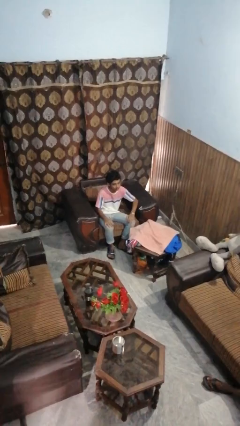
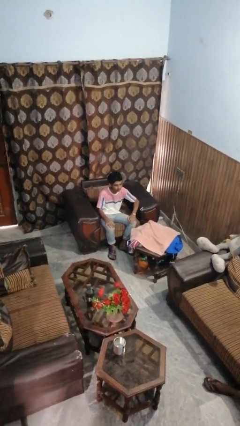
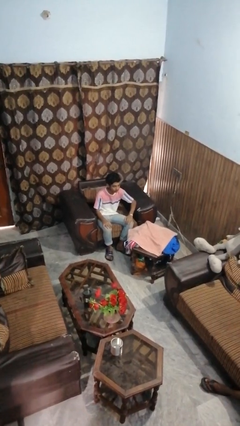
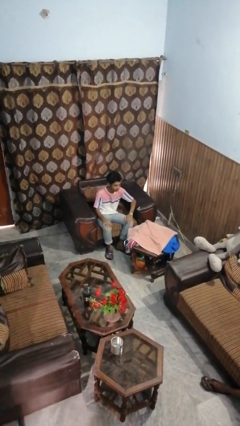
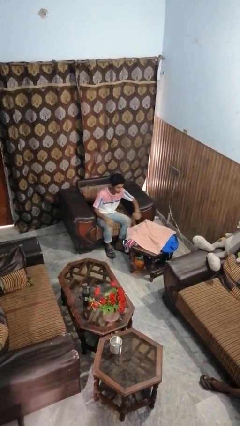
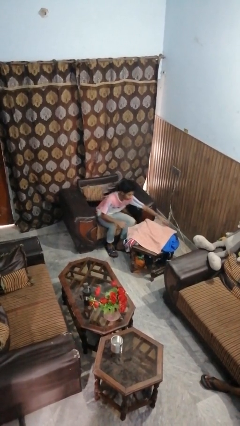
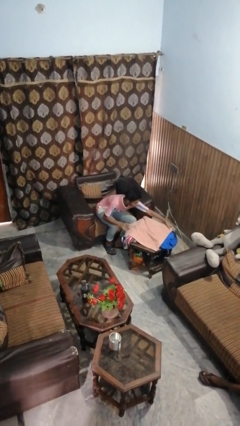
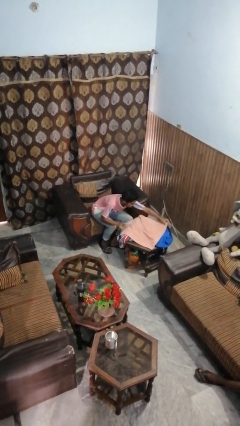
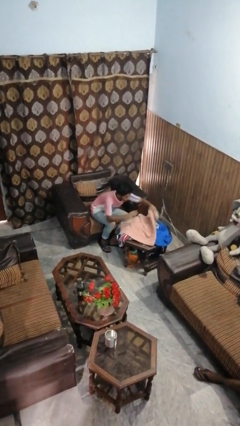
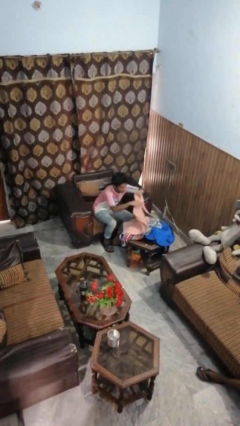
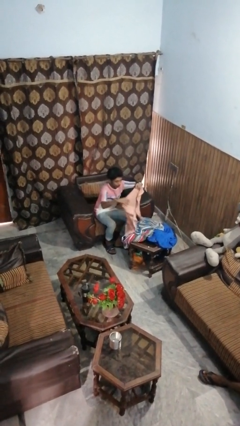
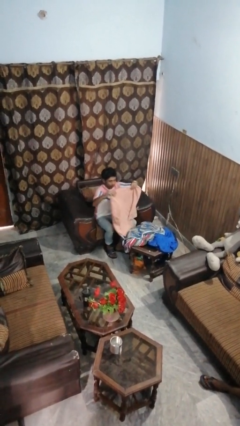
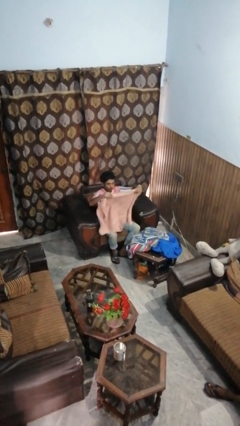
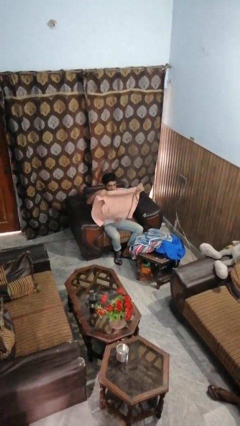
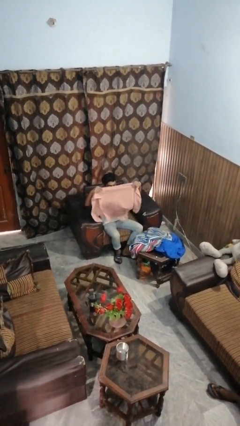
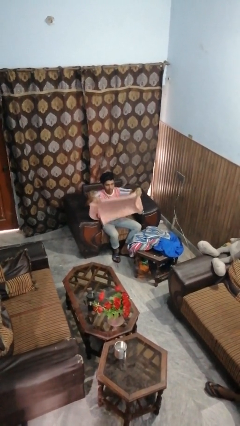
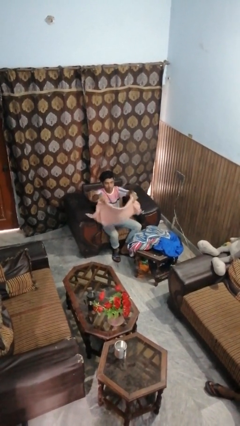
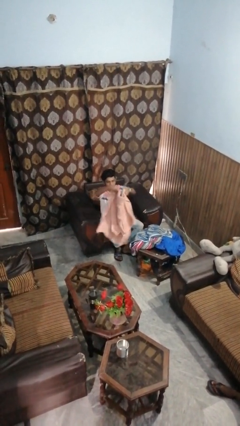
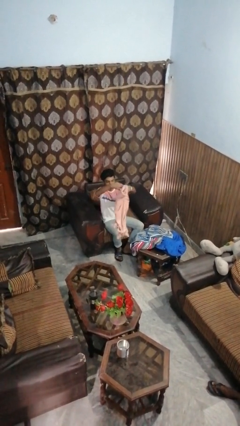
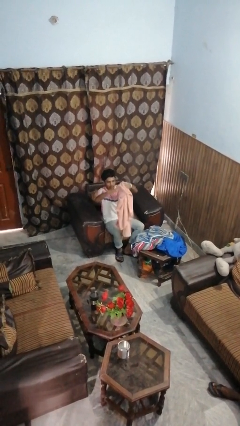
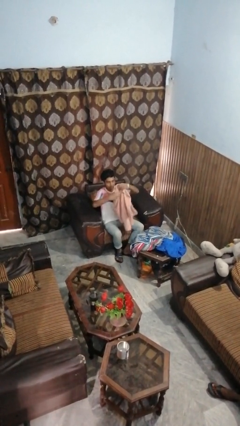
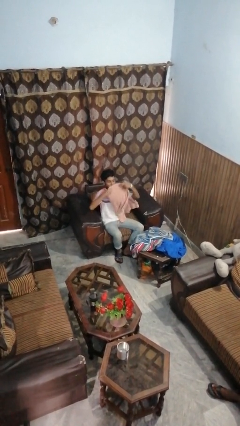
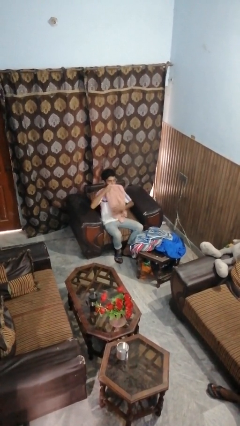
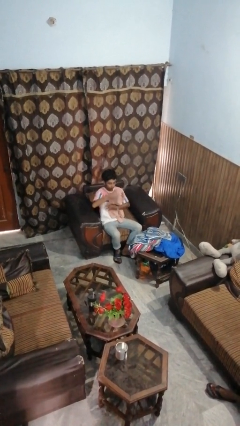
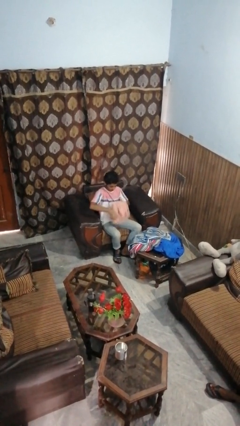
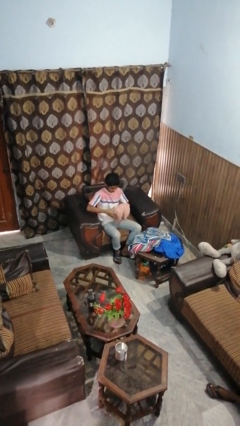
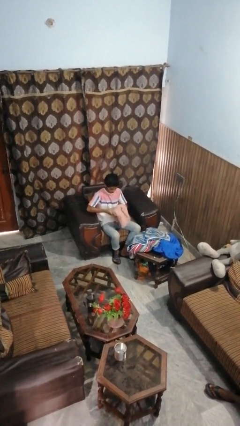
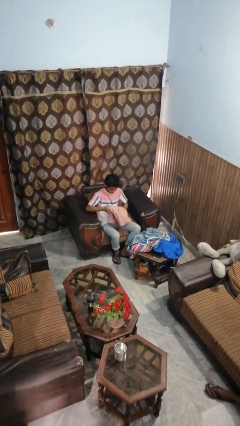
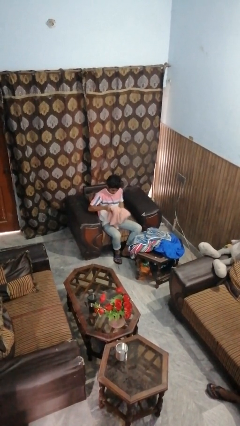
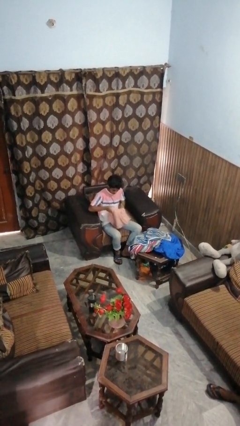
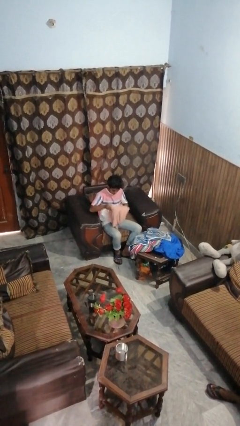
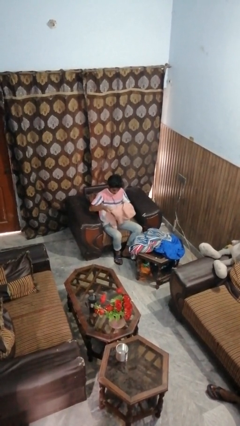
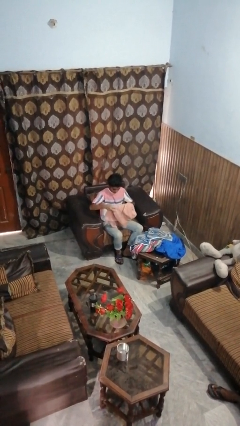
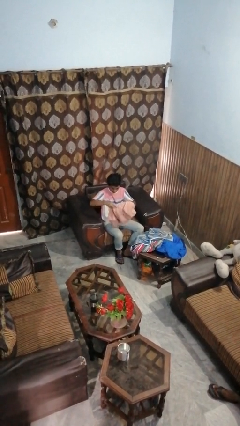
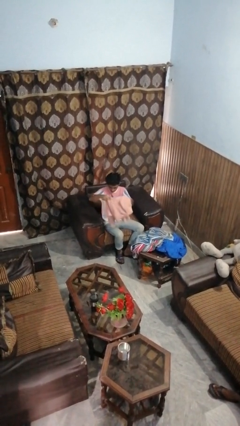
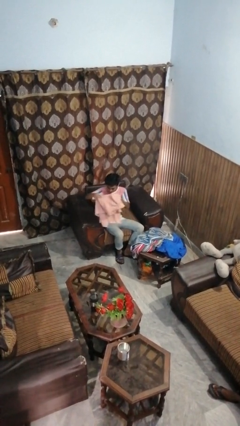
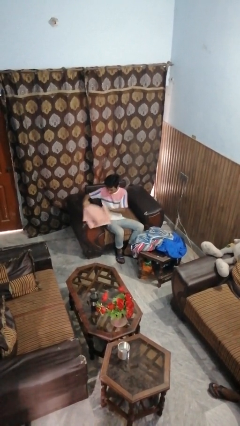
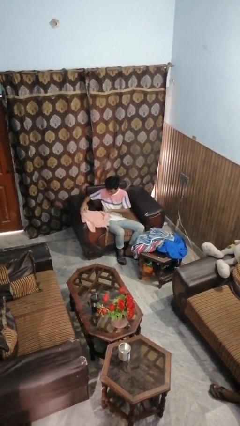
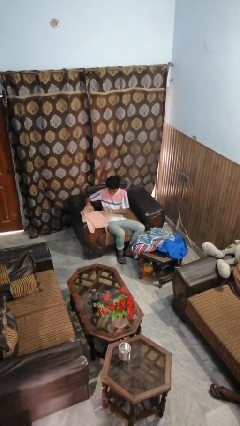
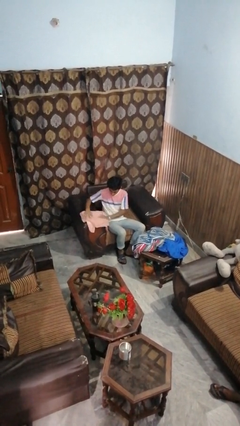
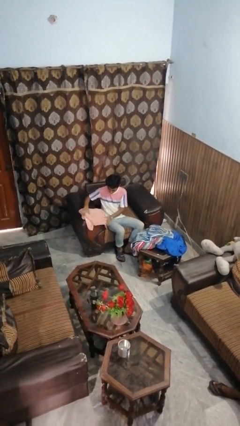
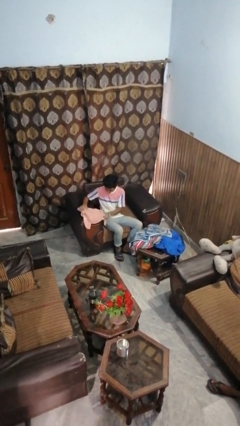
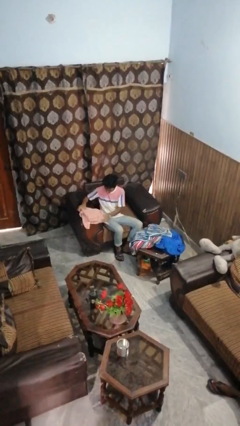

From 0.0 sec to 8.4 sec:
person folds towel

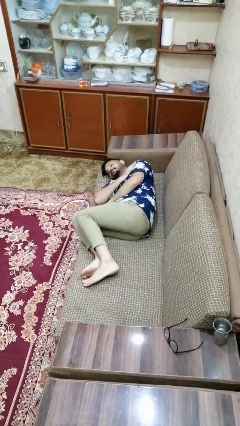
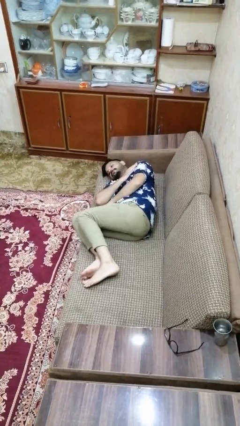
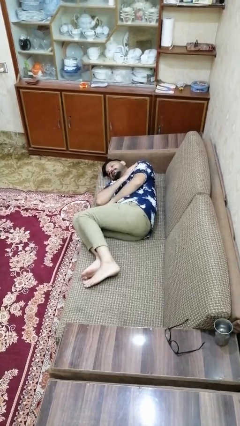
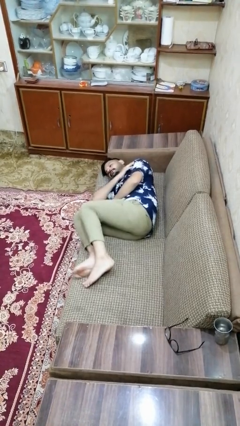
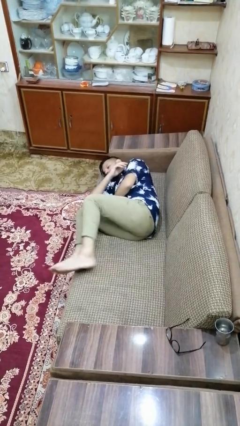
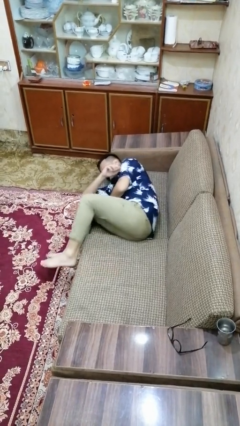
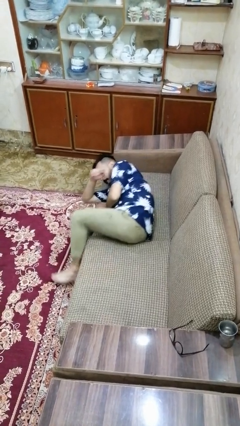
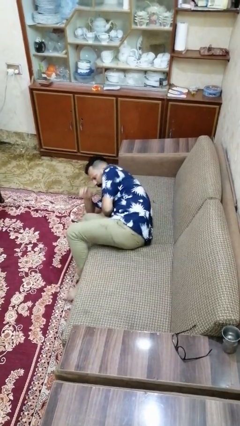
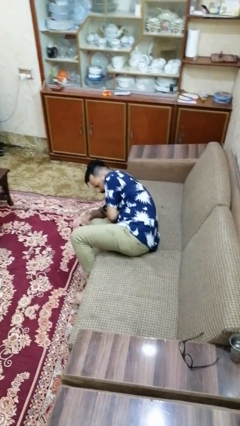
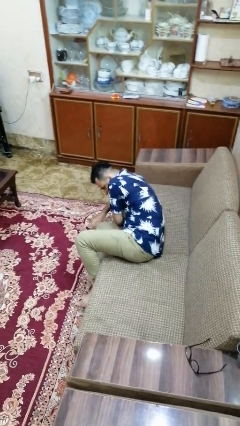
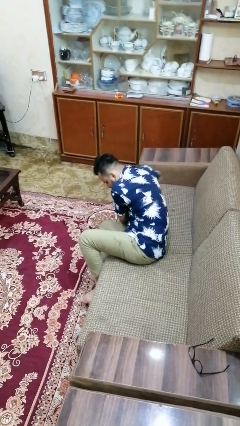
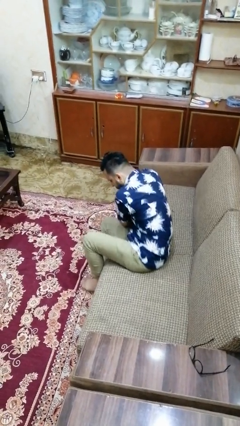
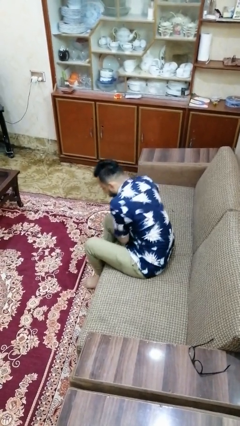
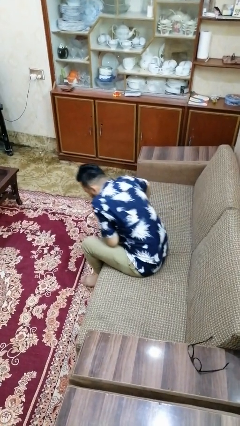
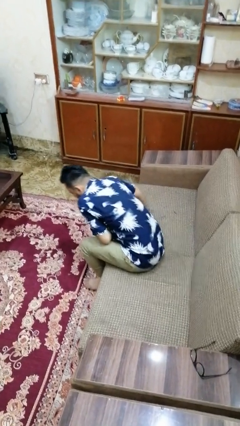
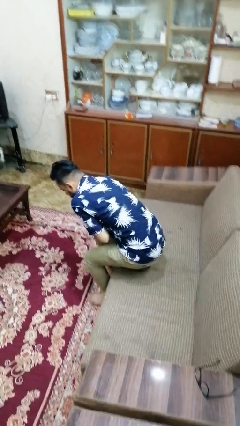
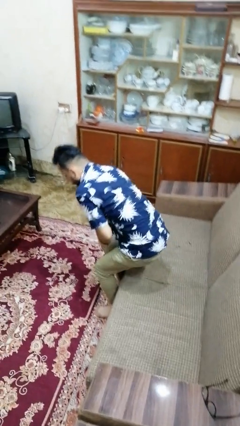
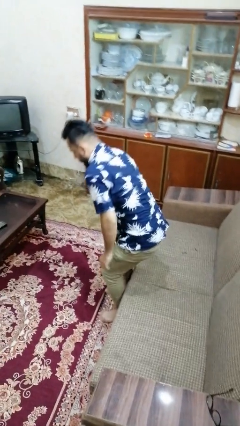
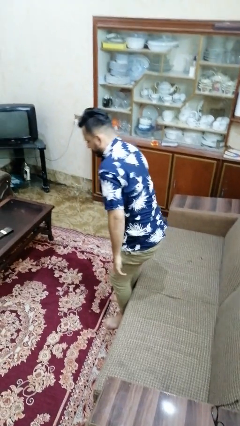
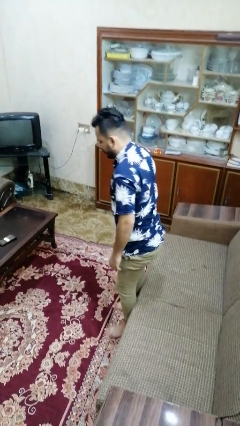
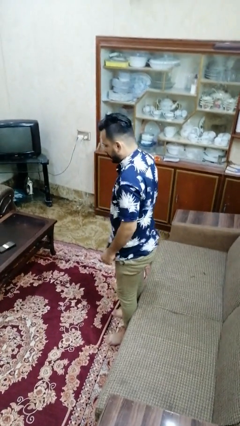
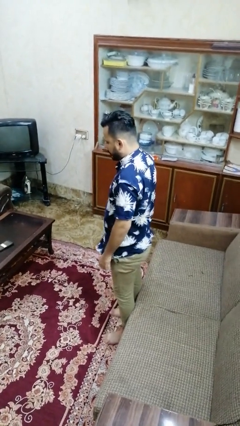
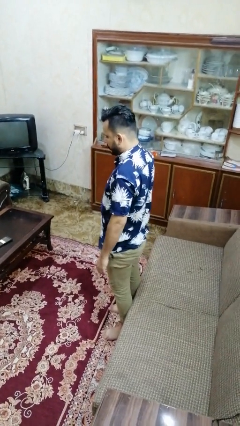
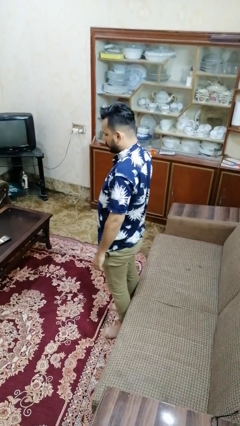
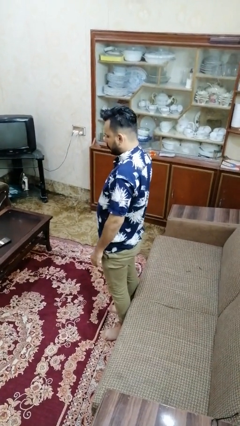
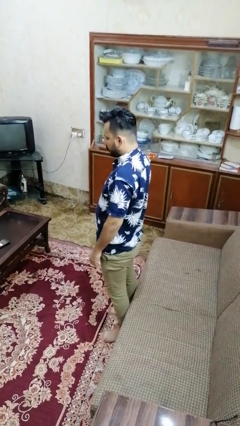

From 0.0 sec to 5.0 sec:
person stands up

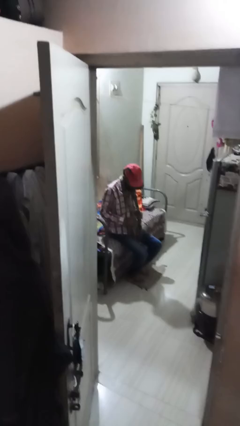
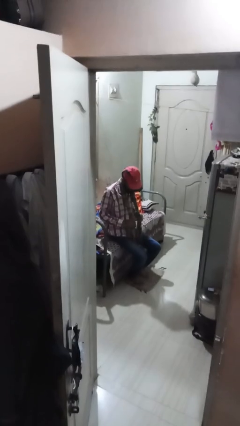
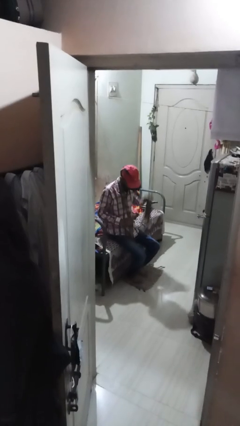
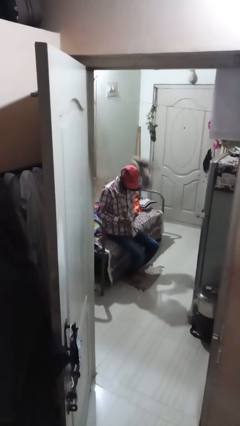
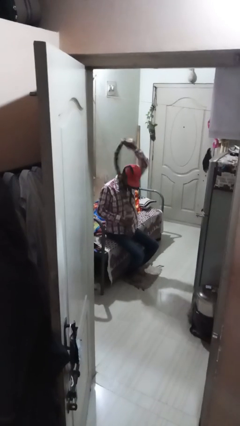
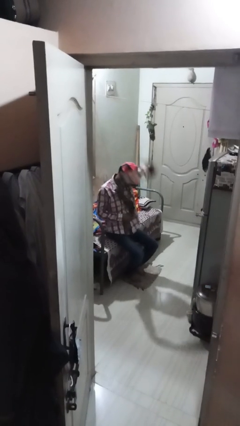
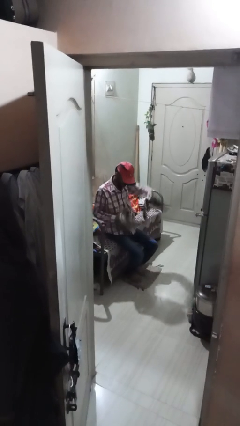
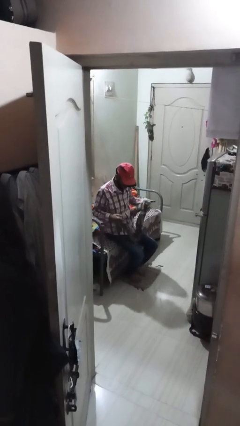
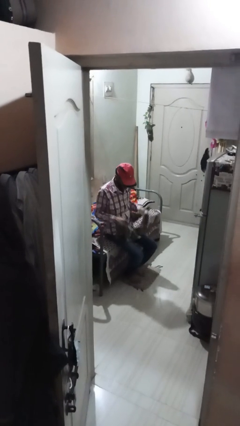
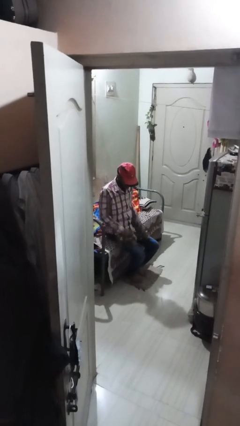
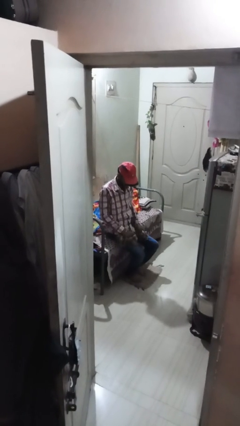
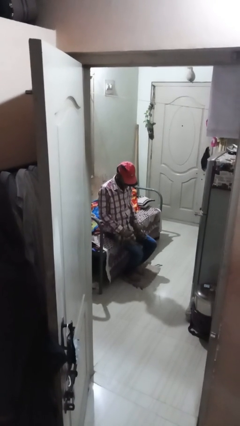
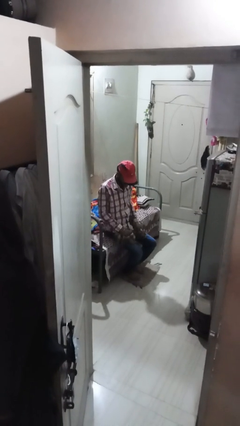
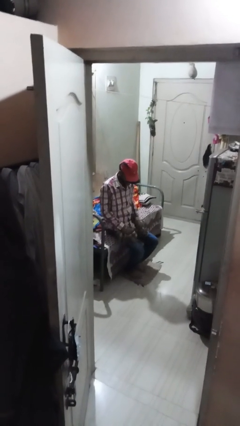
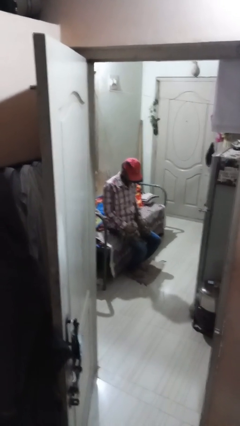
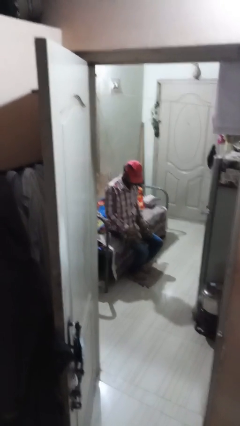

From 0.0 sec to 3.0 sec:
person takes off scarf

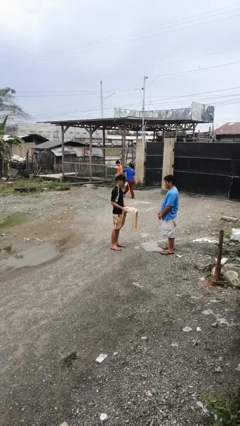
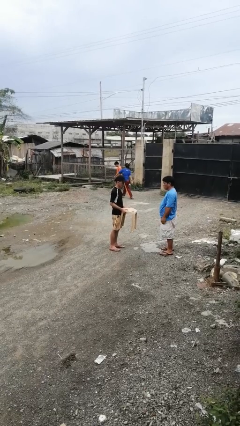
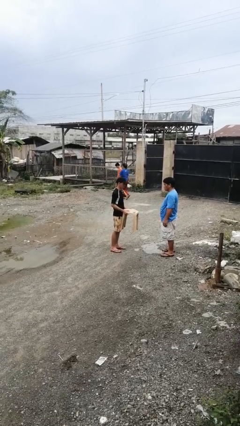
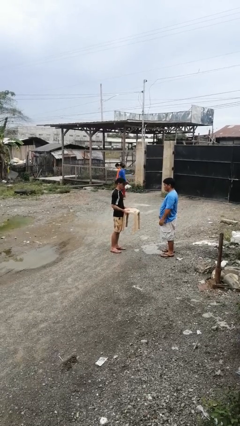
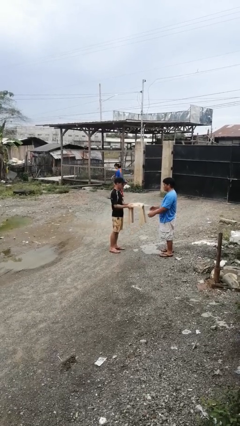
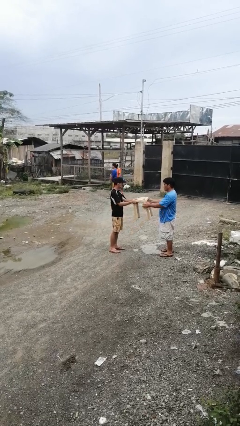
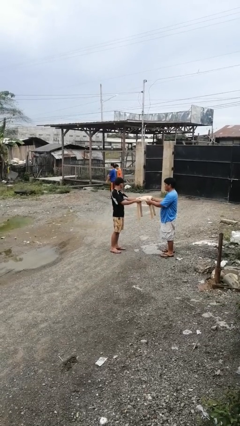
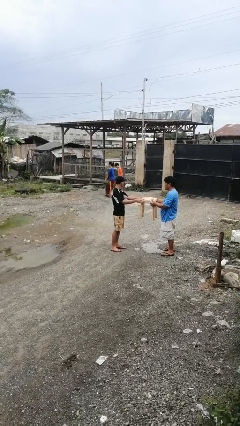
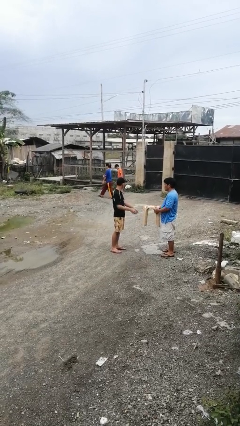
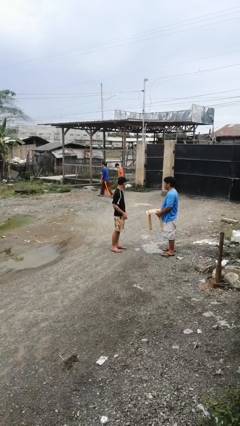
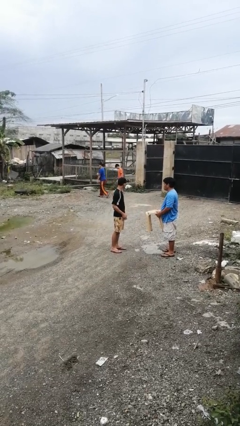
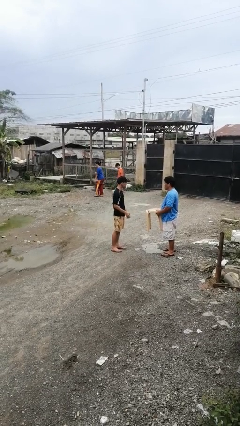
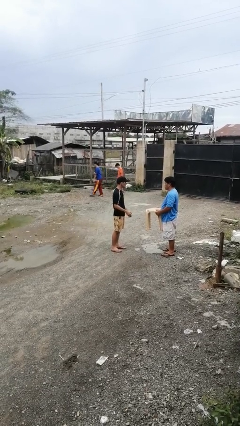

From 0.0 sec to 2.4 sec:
person transfers object to person
